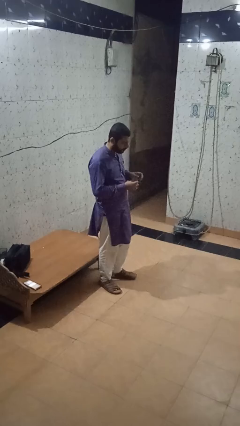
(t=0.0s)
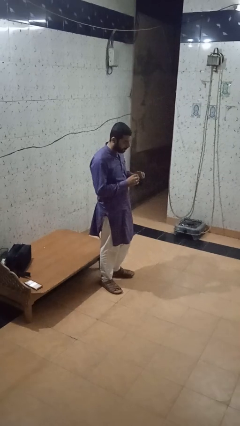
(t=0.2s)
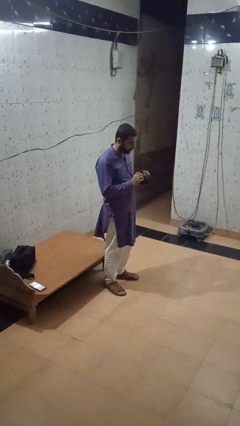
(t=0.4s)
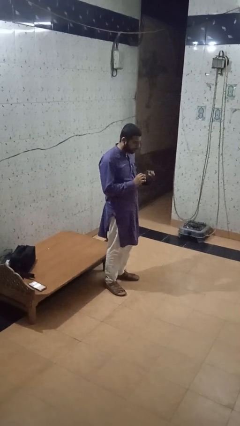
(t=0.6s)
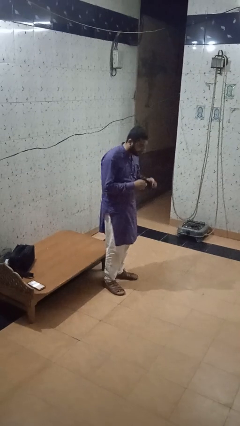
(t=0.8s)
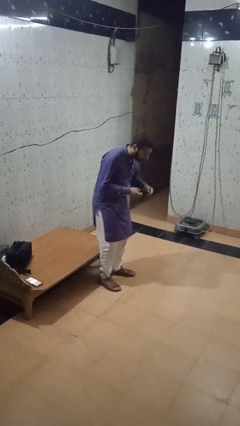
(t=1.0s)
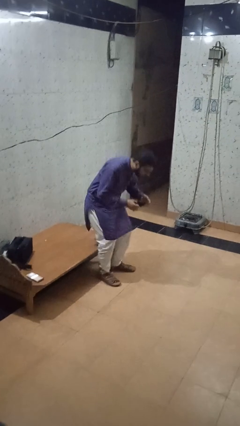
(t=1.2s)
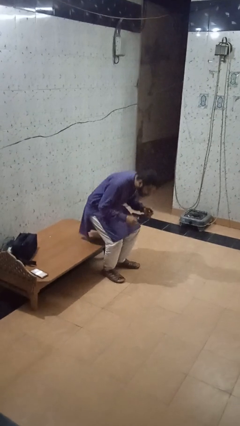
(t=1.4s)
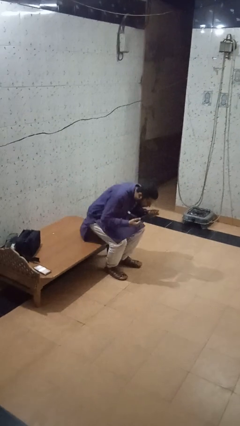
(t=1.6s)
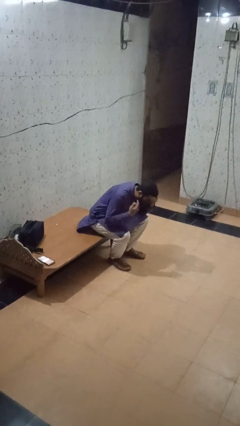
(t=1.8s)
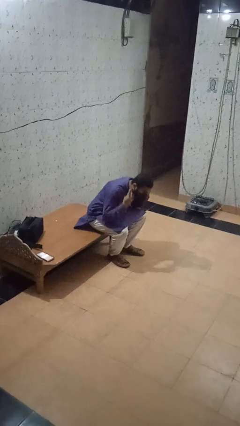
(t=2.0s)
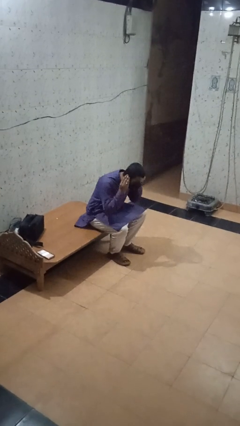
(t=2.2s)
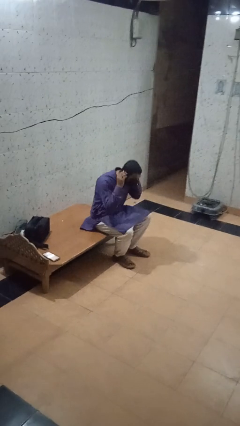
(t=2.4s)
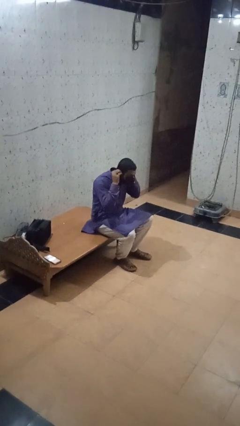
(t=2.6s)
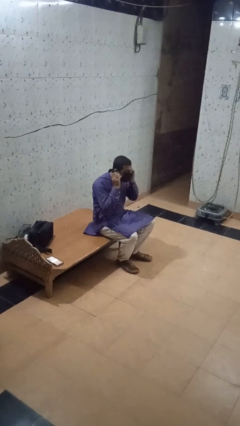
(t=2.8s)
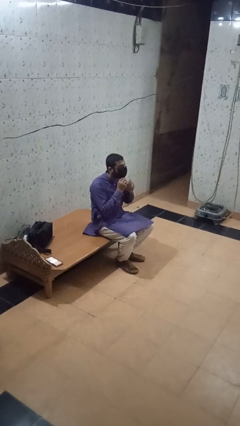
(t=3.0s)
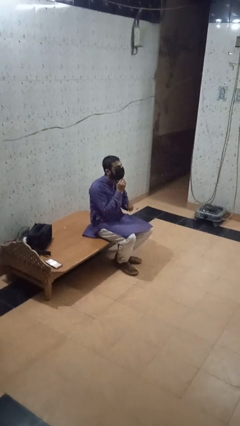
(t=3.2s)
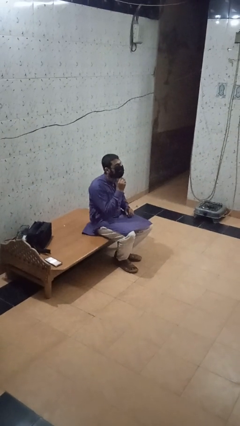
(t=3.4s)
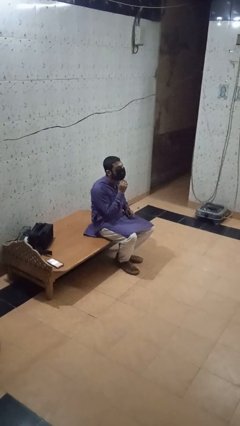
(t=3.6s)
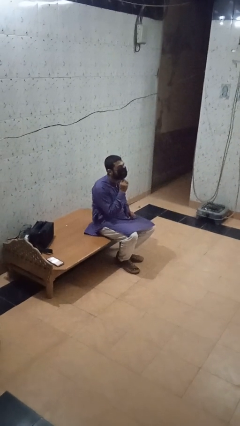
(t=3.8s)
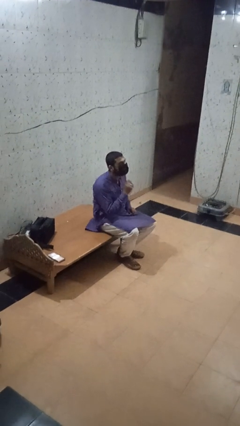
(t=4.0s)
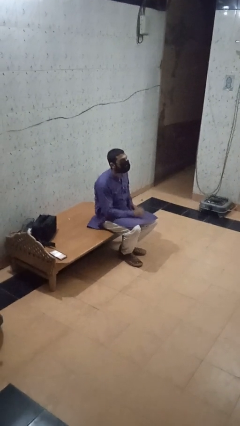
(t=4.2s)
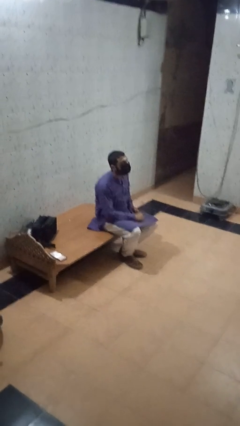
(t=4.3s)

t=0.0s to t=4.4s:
person puts on facemask

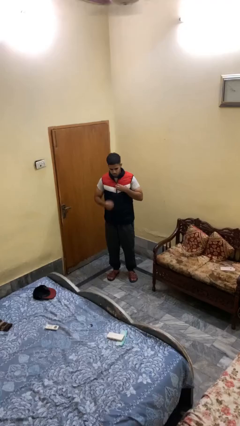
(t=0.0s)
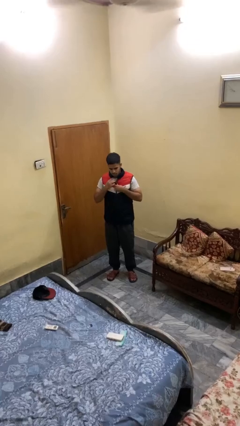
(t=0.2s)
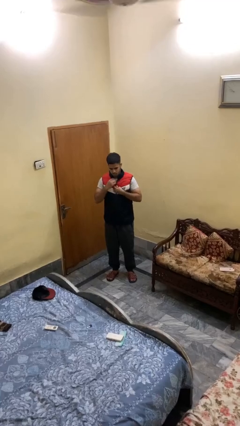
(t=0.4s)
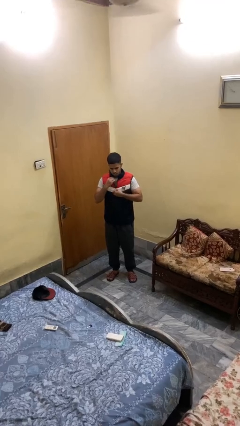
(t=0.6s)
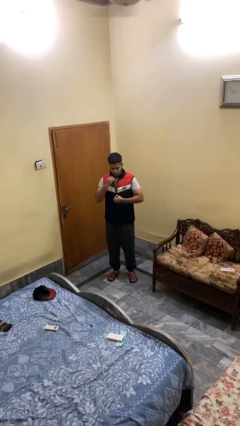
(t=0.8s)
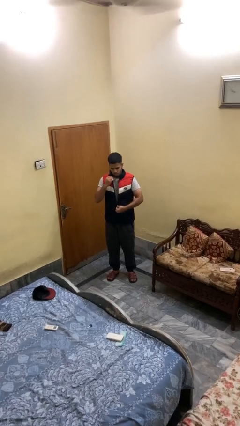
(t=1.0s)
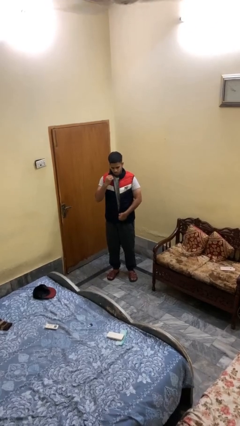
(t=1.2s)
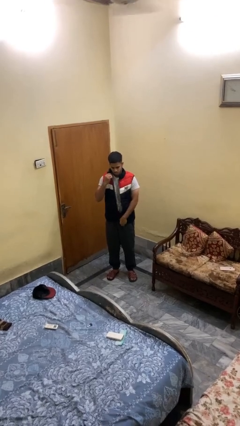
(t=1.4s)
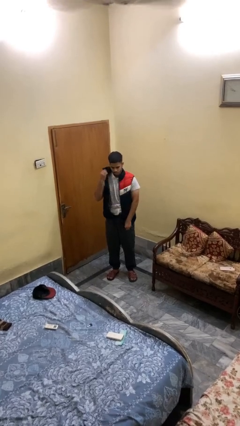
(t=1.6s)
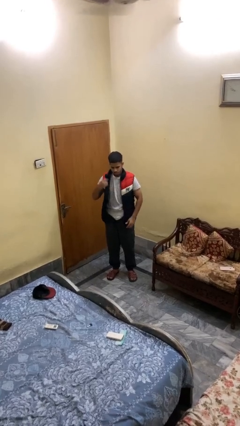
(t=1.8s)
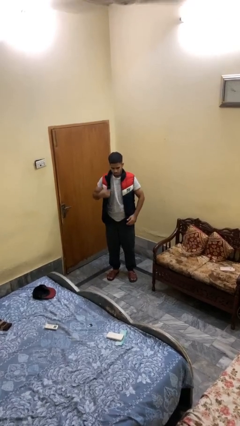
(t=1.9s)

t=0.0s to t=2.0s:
person unzips jacket

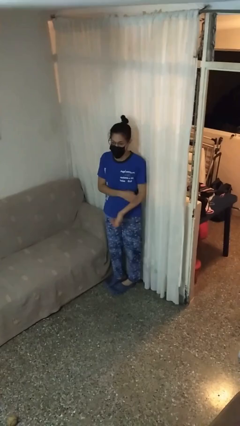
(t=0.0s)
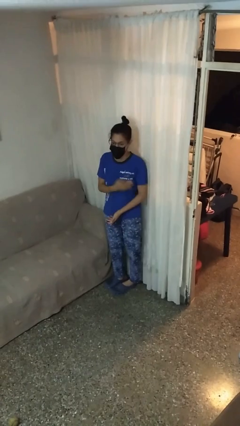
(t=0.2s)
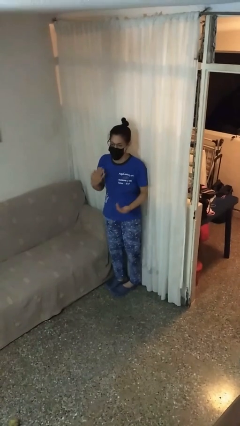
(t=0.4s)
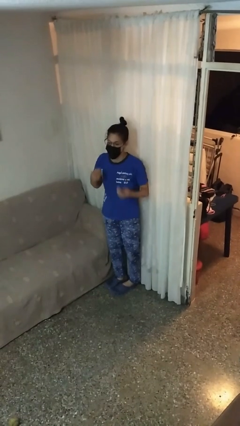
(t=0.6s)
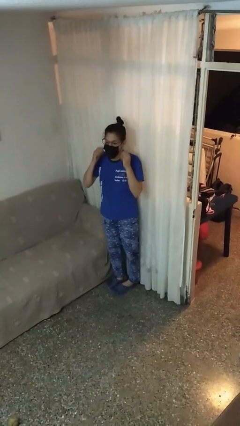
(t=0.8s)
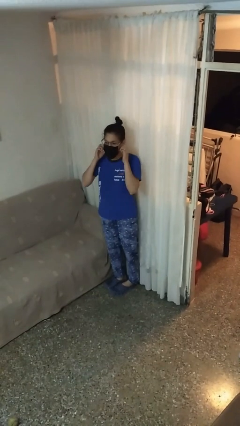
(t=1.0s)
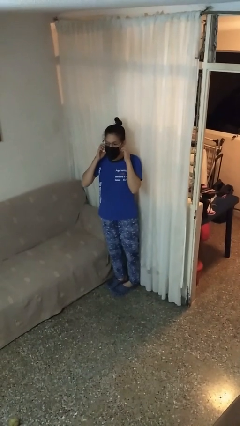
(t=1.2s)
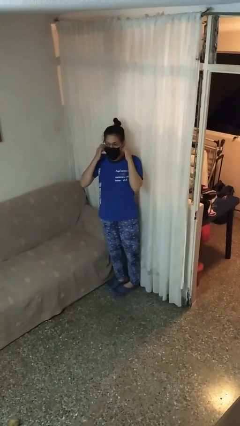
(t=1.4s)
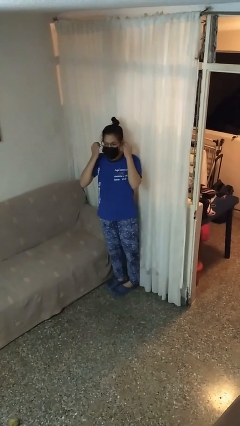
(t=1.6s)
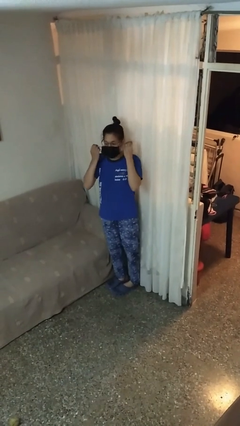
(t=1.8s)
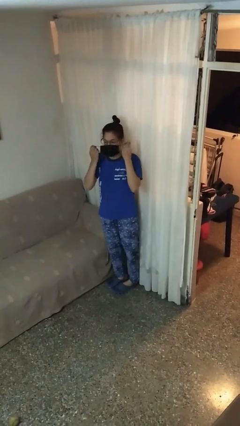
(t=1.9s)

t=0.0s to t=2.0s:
person takes off facemask

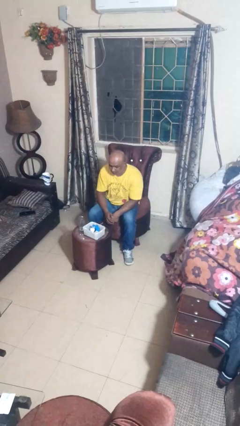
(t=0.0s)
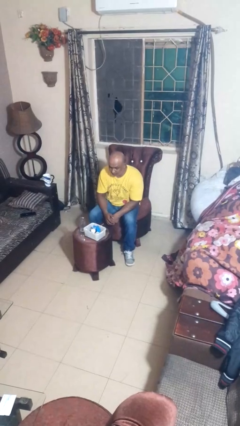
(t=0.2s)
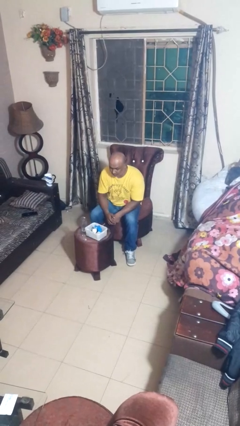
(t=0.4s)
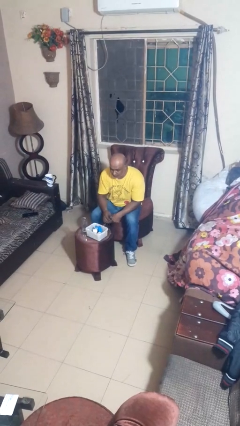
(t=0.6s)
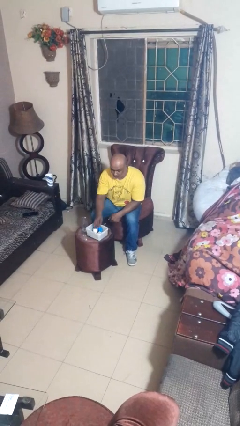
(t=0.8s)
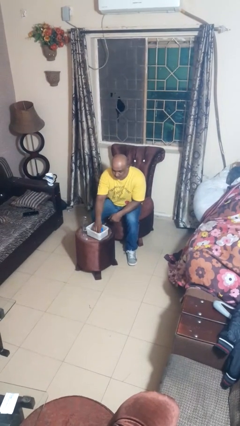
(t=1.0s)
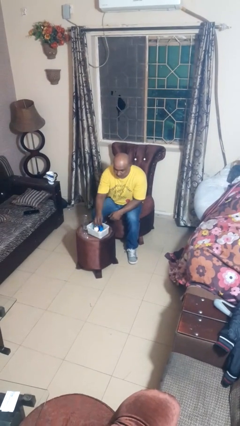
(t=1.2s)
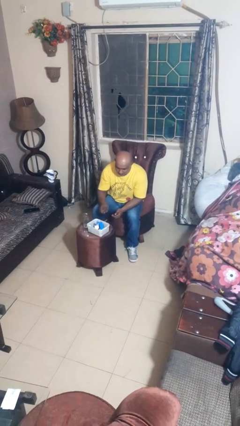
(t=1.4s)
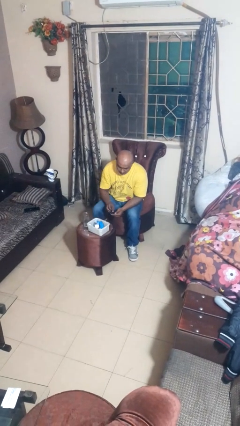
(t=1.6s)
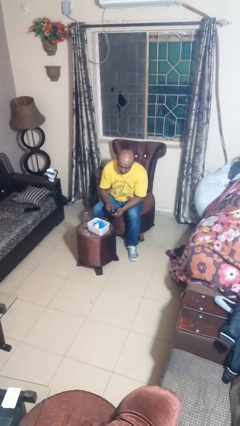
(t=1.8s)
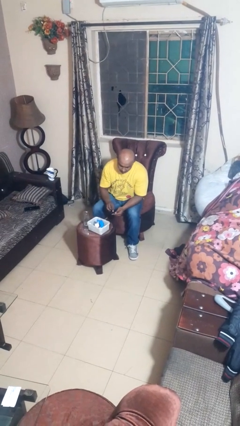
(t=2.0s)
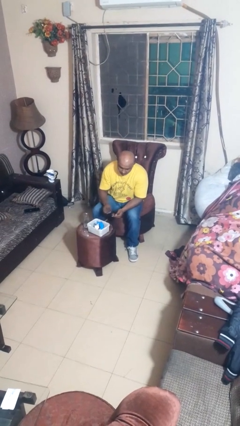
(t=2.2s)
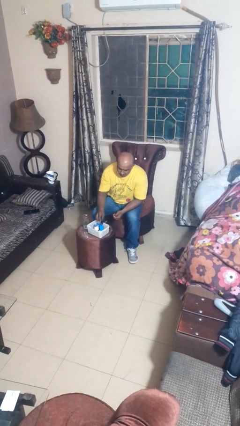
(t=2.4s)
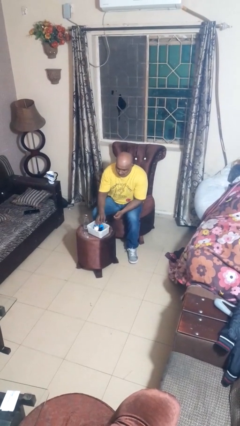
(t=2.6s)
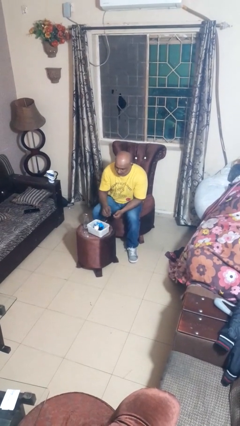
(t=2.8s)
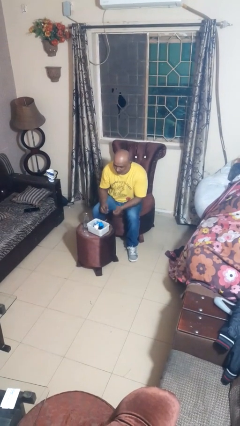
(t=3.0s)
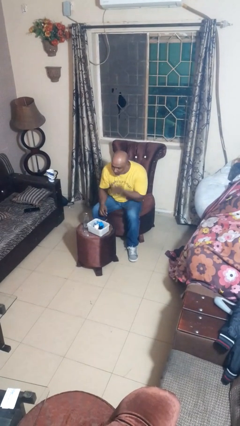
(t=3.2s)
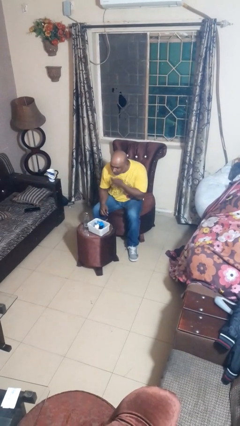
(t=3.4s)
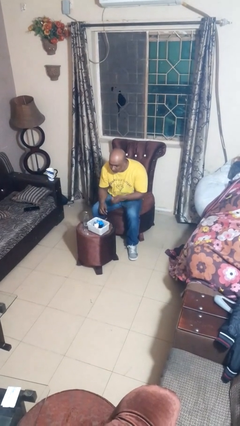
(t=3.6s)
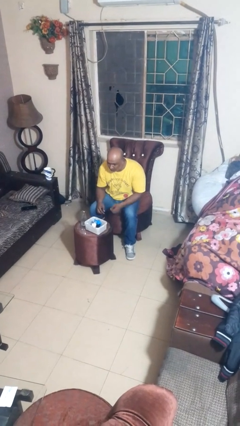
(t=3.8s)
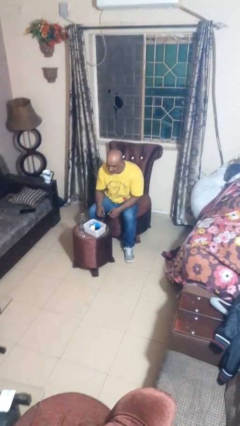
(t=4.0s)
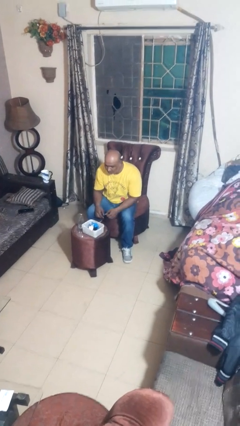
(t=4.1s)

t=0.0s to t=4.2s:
person takes medicine pills

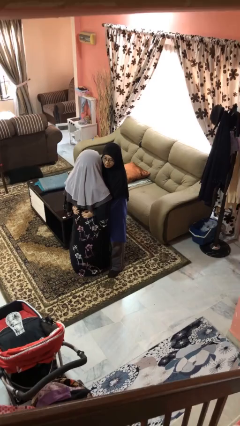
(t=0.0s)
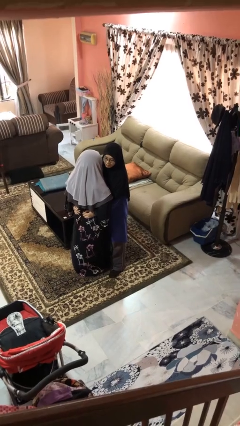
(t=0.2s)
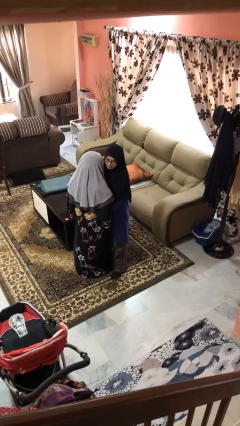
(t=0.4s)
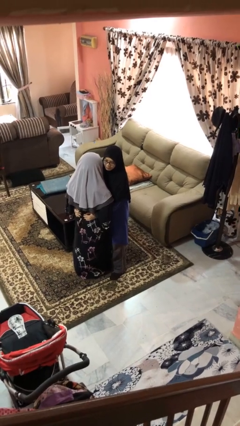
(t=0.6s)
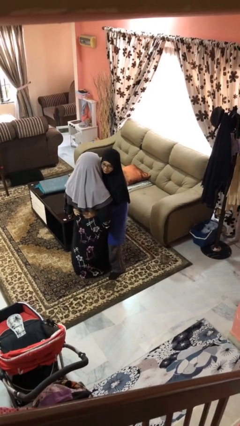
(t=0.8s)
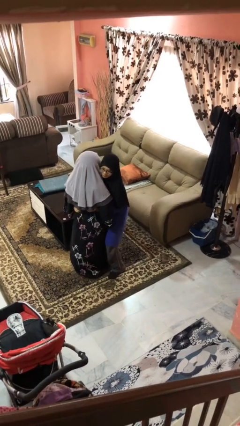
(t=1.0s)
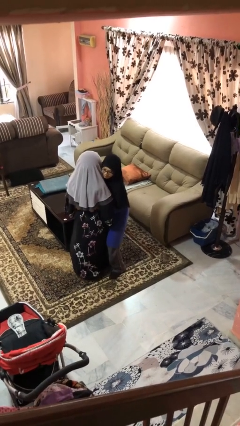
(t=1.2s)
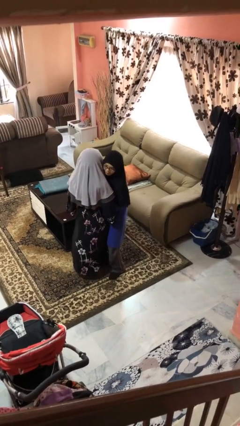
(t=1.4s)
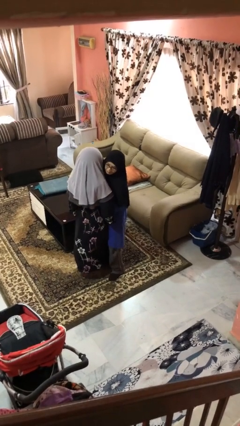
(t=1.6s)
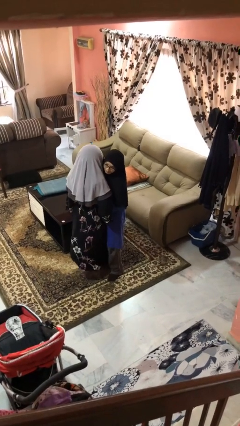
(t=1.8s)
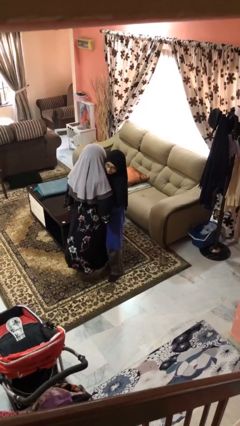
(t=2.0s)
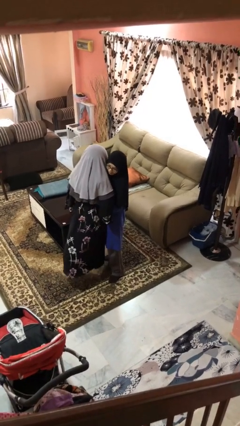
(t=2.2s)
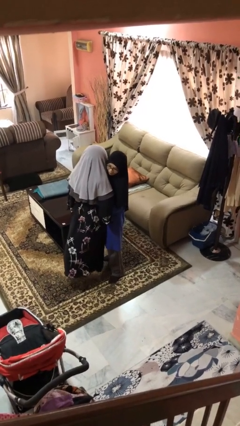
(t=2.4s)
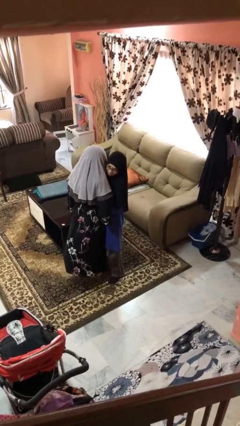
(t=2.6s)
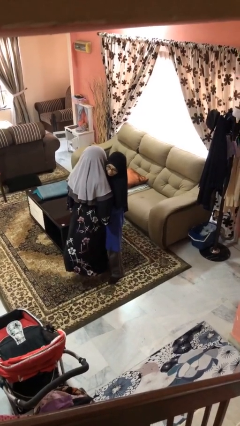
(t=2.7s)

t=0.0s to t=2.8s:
person picks up person

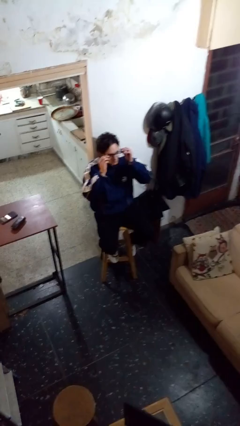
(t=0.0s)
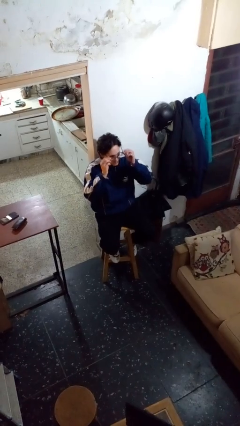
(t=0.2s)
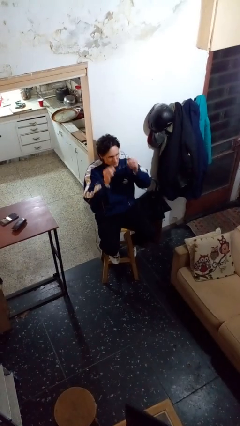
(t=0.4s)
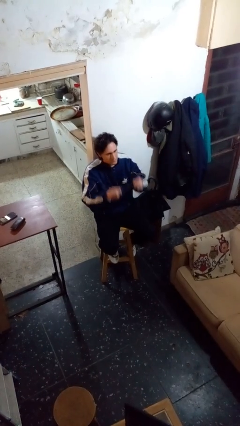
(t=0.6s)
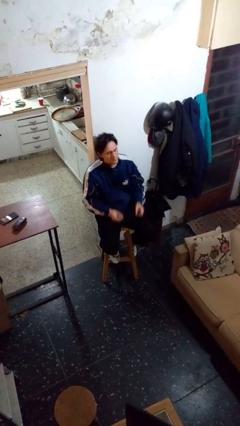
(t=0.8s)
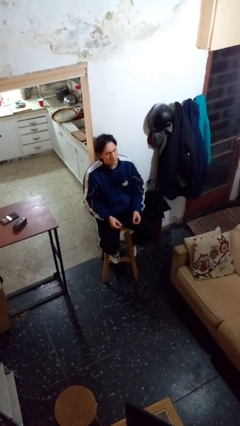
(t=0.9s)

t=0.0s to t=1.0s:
person takes off glasses

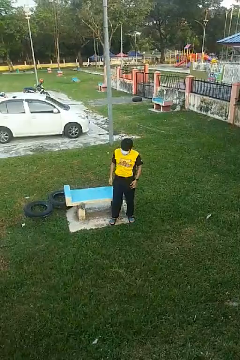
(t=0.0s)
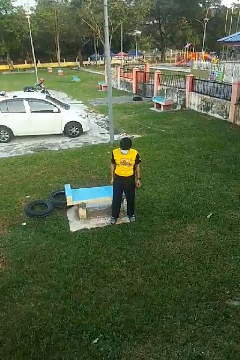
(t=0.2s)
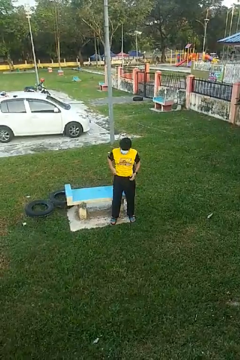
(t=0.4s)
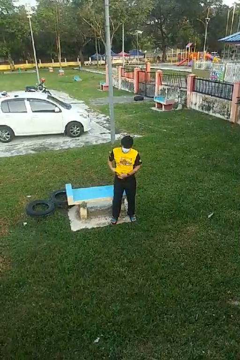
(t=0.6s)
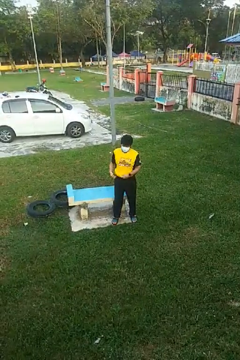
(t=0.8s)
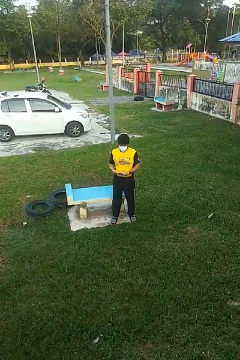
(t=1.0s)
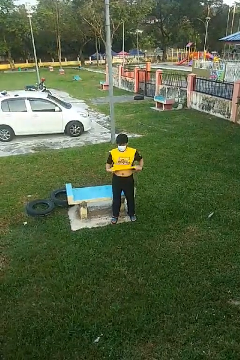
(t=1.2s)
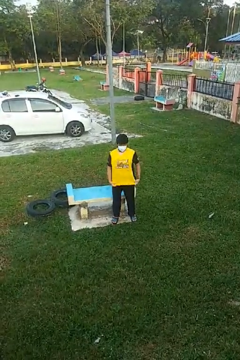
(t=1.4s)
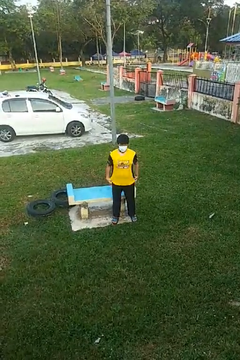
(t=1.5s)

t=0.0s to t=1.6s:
person untucks shirt
